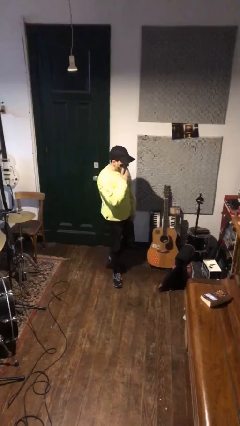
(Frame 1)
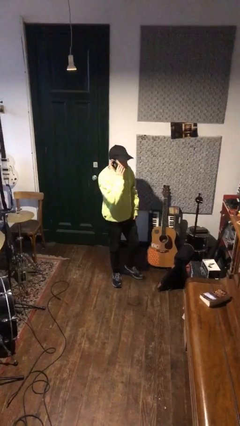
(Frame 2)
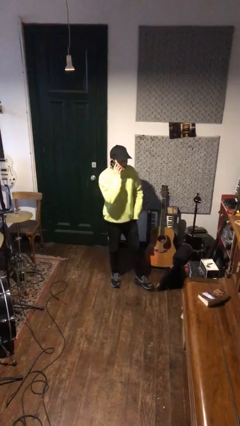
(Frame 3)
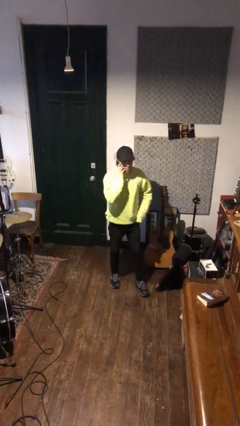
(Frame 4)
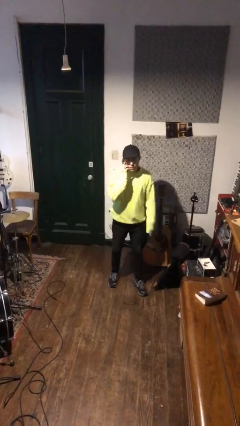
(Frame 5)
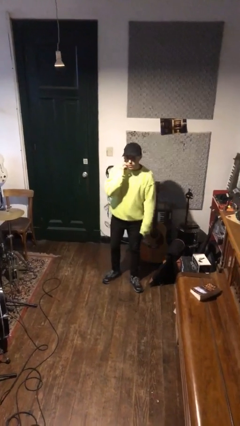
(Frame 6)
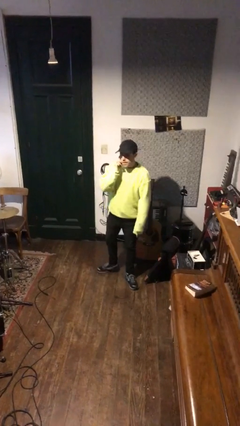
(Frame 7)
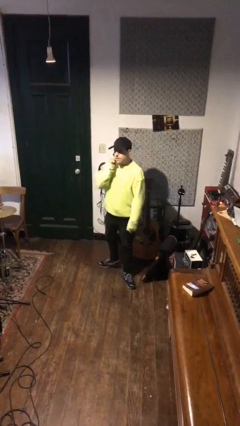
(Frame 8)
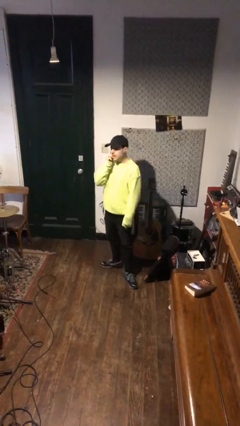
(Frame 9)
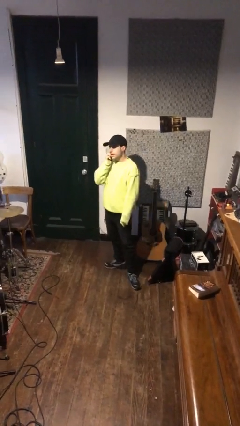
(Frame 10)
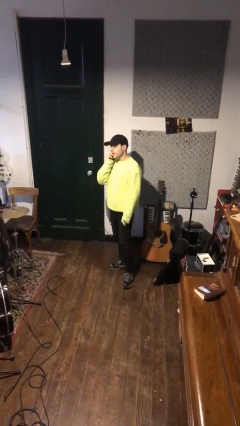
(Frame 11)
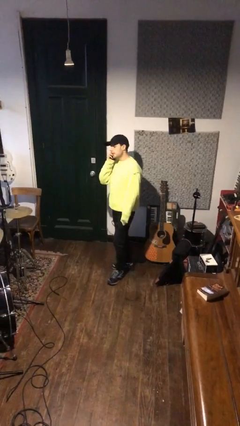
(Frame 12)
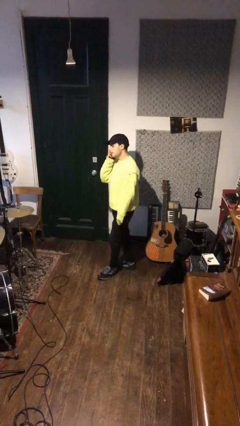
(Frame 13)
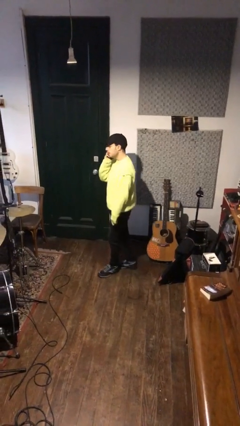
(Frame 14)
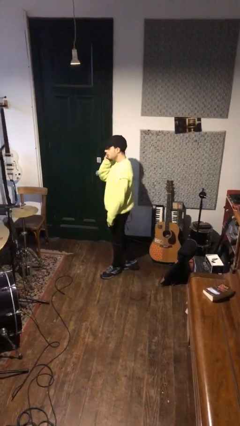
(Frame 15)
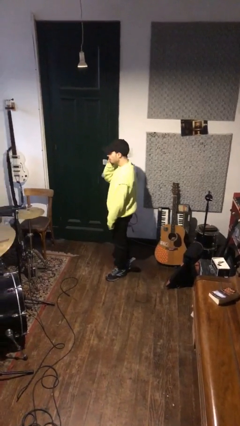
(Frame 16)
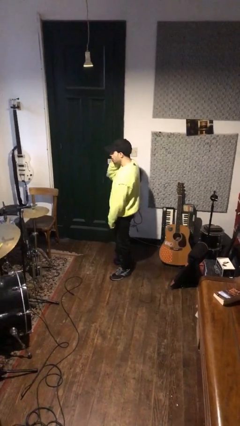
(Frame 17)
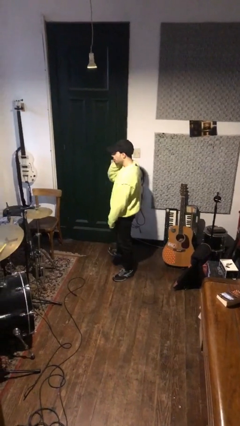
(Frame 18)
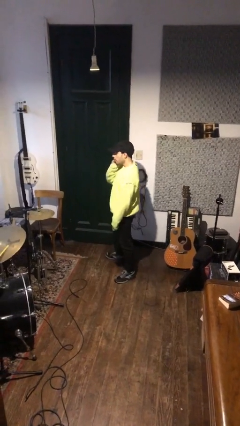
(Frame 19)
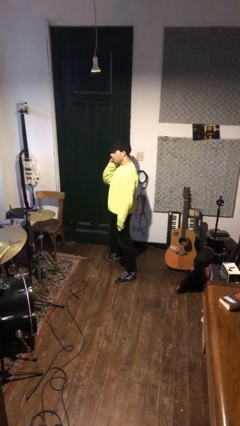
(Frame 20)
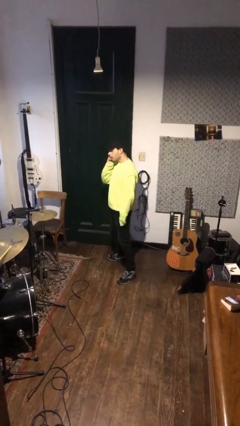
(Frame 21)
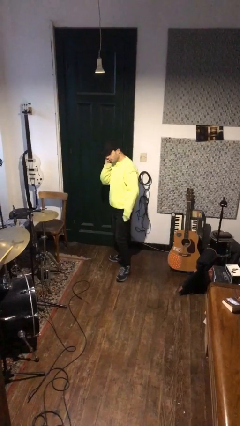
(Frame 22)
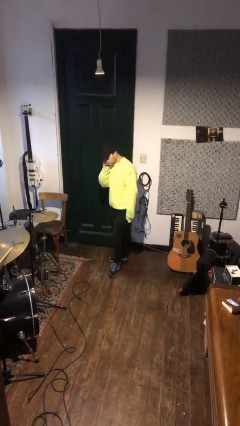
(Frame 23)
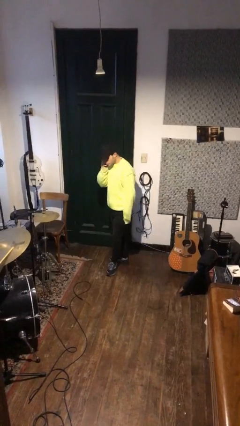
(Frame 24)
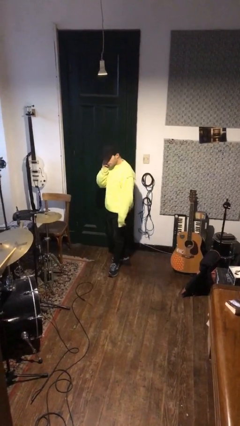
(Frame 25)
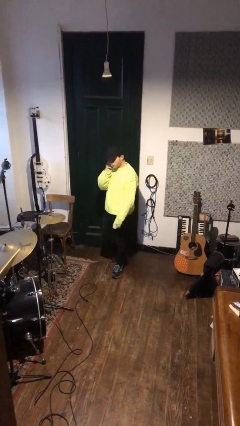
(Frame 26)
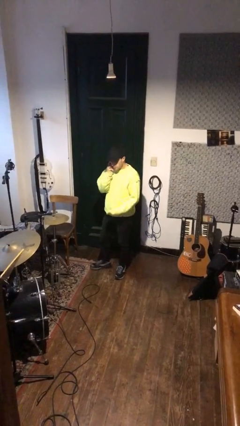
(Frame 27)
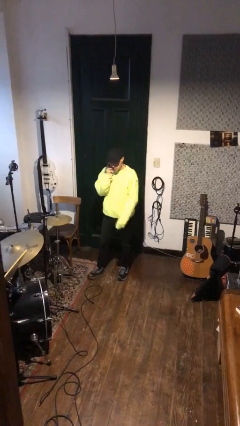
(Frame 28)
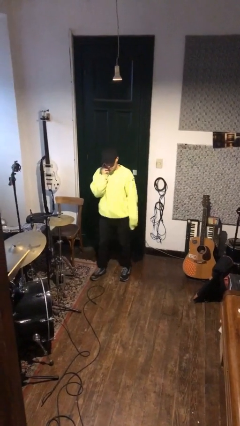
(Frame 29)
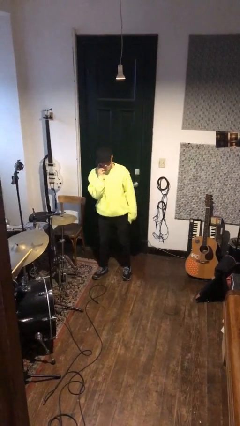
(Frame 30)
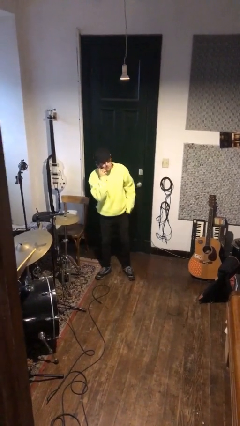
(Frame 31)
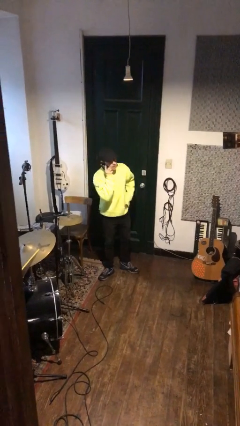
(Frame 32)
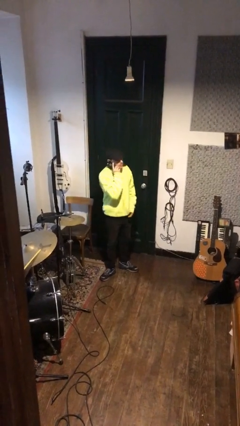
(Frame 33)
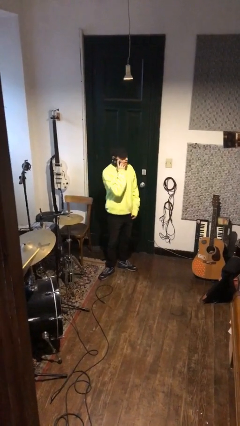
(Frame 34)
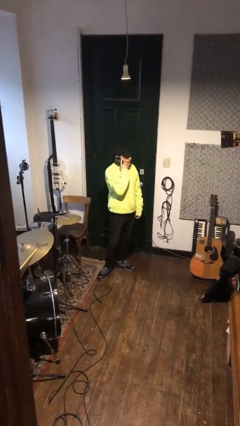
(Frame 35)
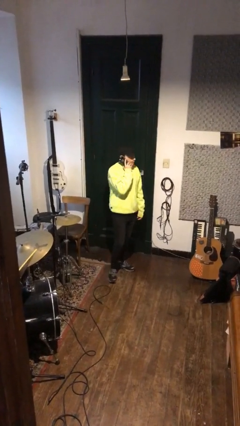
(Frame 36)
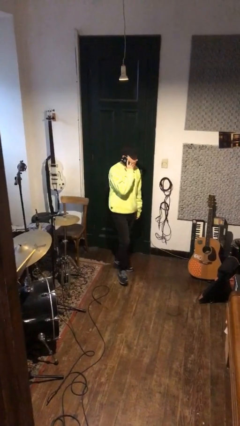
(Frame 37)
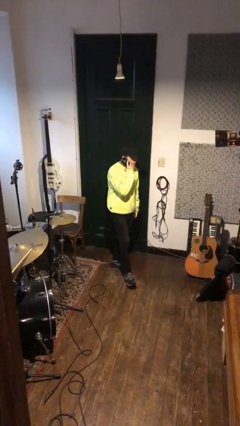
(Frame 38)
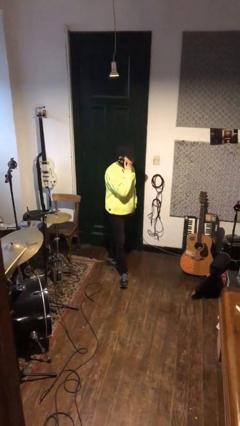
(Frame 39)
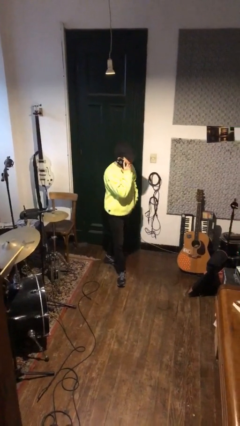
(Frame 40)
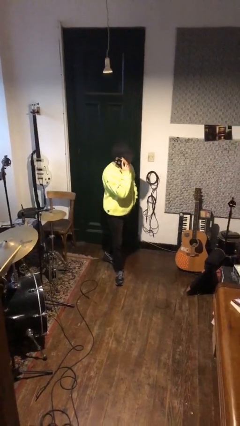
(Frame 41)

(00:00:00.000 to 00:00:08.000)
person talks on phone

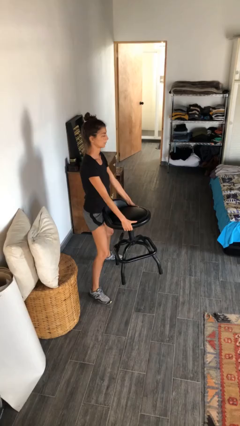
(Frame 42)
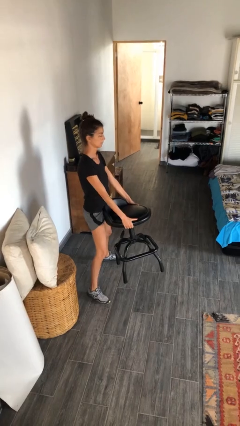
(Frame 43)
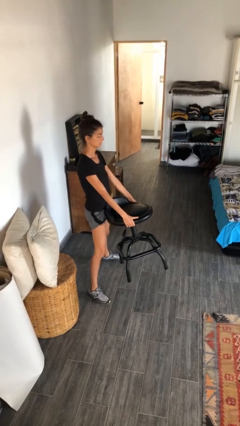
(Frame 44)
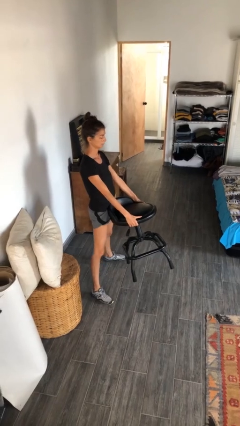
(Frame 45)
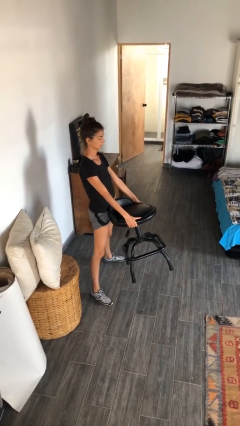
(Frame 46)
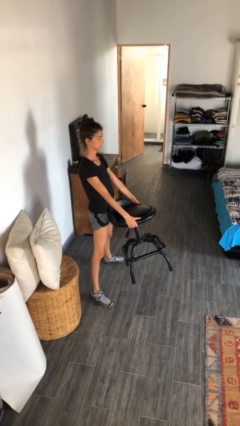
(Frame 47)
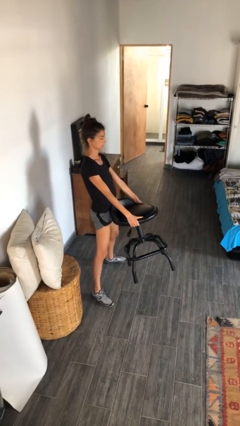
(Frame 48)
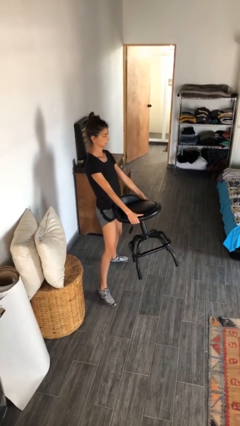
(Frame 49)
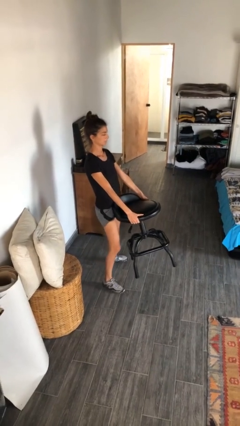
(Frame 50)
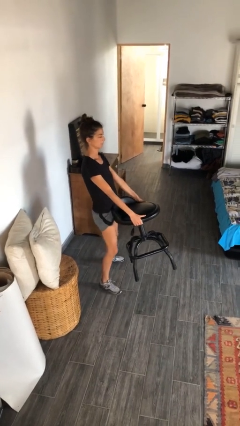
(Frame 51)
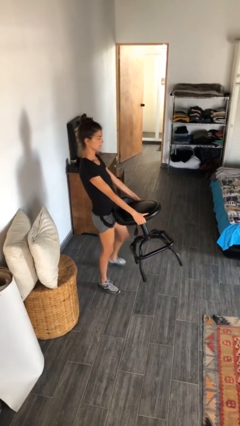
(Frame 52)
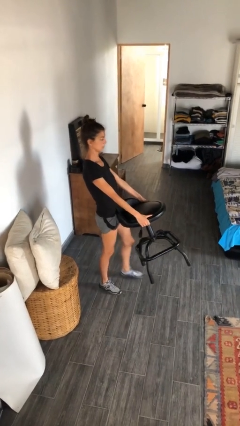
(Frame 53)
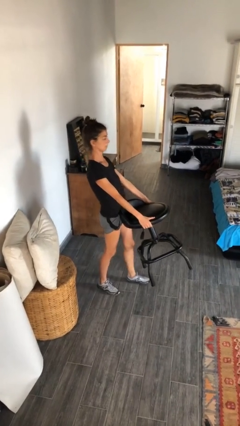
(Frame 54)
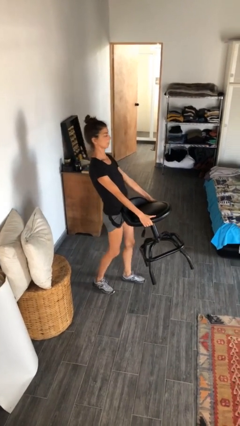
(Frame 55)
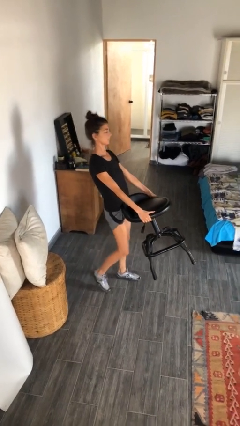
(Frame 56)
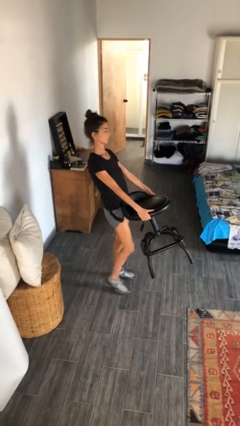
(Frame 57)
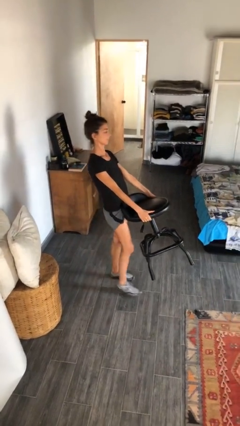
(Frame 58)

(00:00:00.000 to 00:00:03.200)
person carries furniture

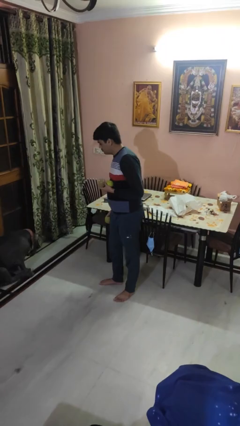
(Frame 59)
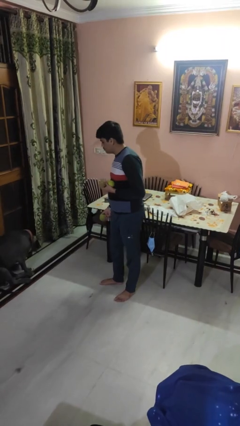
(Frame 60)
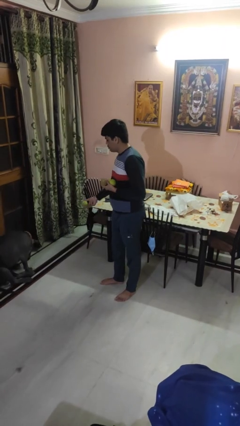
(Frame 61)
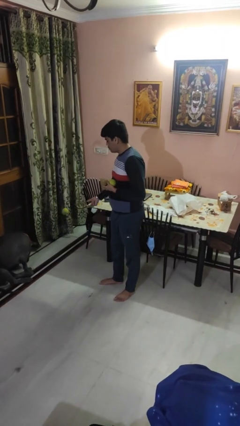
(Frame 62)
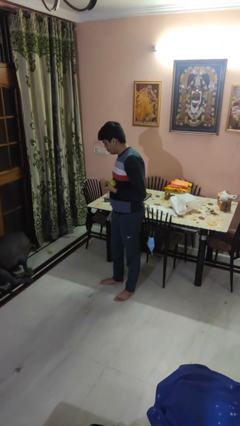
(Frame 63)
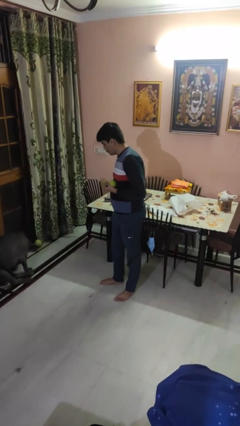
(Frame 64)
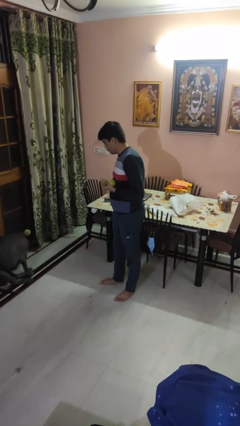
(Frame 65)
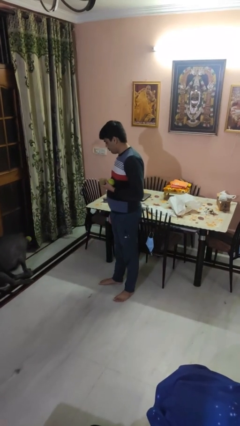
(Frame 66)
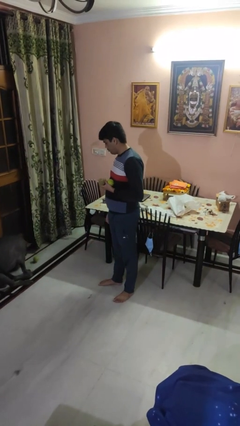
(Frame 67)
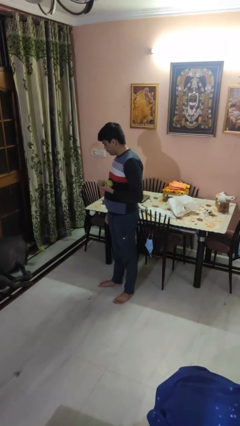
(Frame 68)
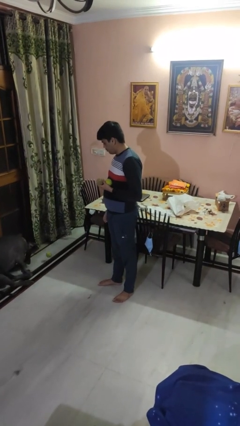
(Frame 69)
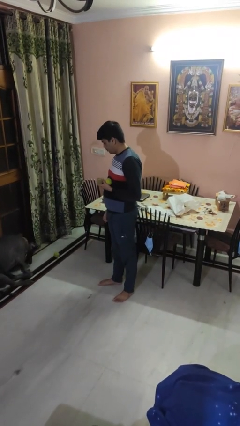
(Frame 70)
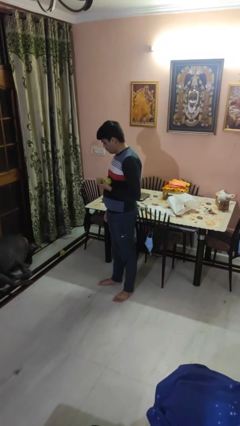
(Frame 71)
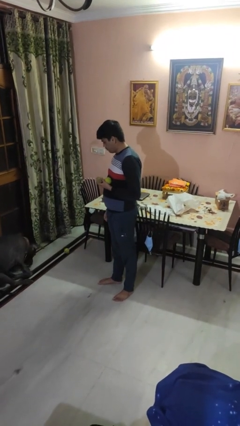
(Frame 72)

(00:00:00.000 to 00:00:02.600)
person throws object to dog

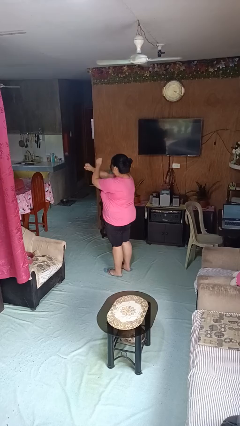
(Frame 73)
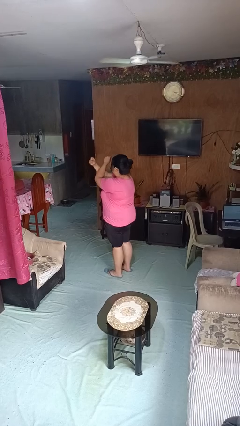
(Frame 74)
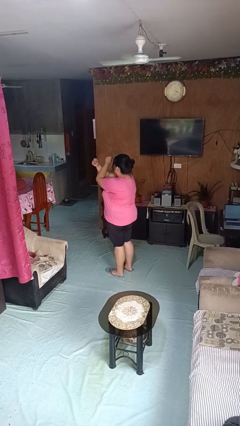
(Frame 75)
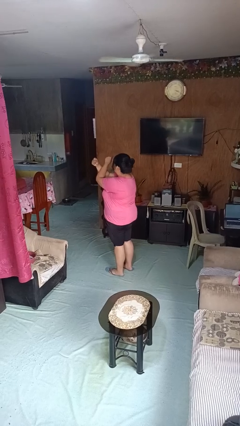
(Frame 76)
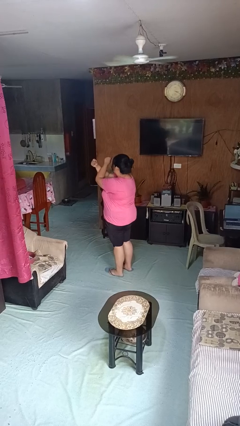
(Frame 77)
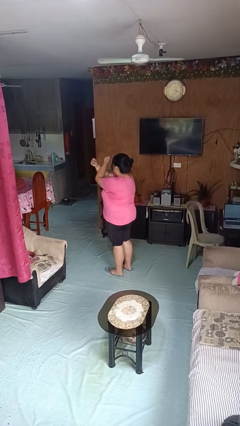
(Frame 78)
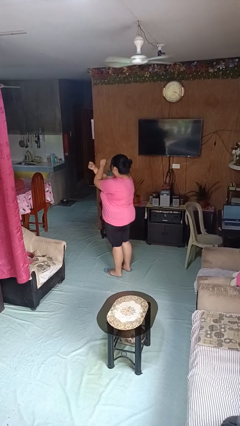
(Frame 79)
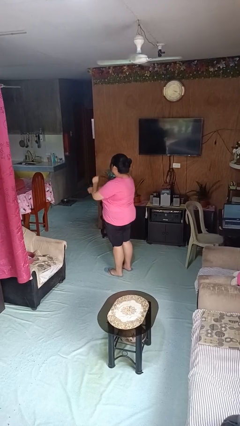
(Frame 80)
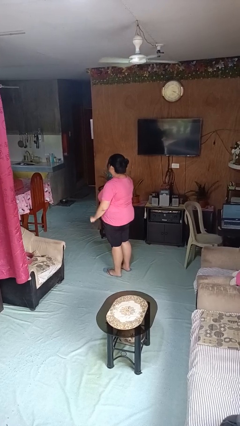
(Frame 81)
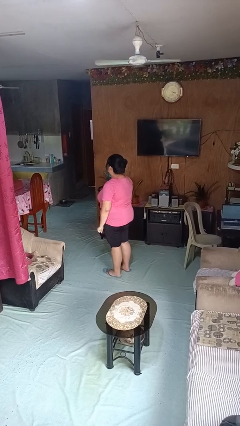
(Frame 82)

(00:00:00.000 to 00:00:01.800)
person gestures arms x

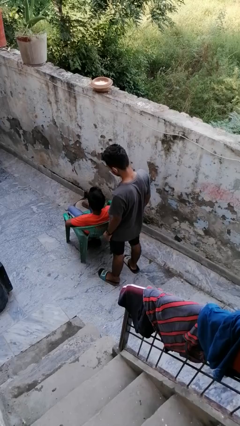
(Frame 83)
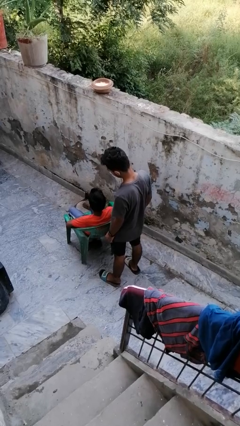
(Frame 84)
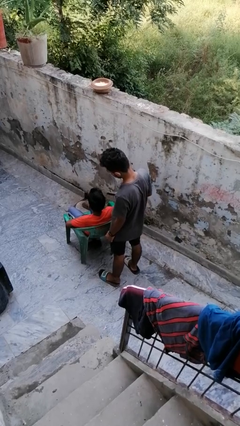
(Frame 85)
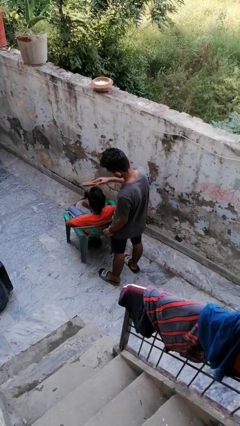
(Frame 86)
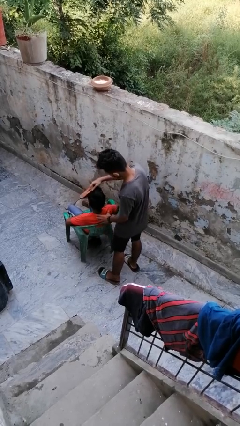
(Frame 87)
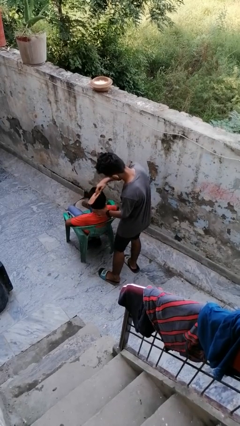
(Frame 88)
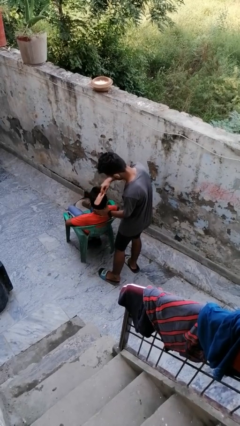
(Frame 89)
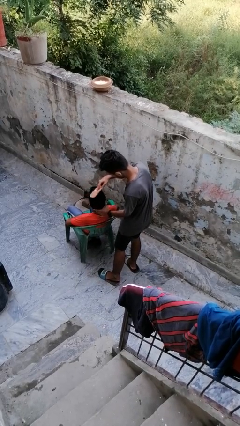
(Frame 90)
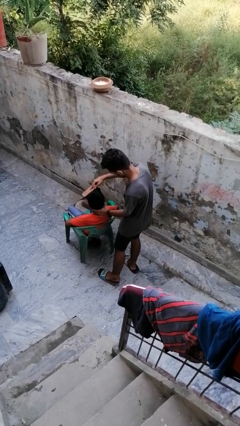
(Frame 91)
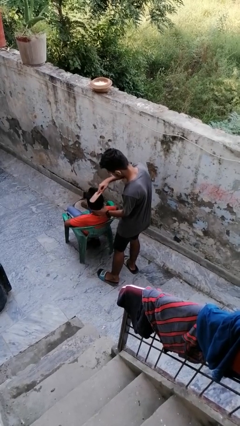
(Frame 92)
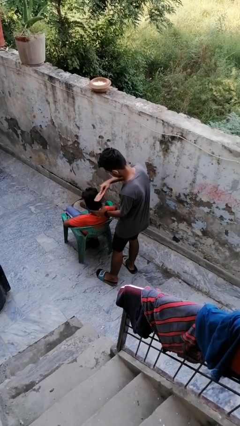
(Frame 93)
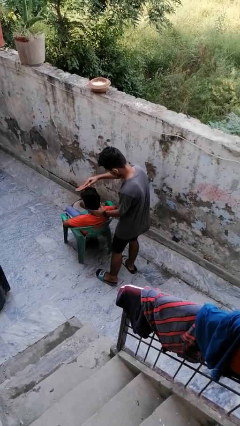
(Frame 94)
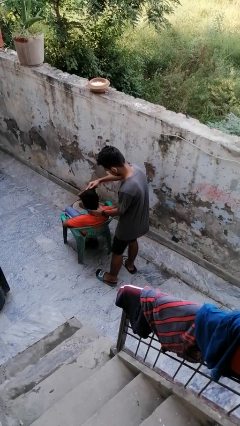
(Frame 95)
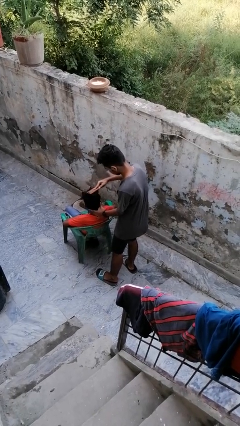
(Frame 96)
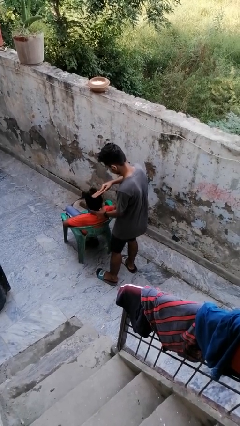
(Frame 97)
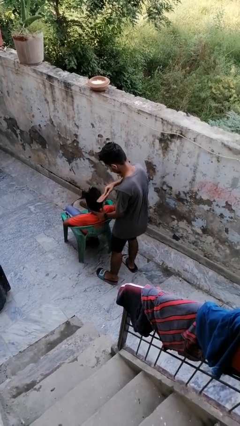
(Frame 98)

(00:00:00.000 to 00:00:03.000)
person brushes hair of person
